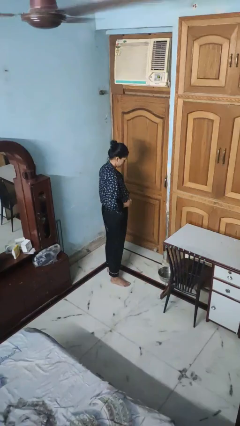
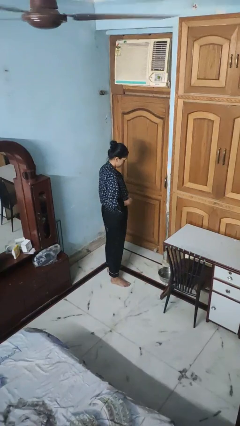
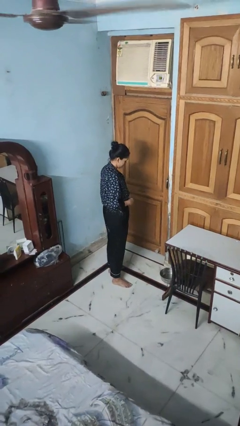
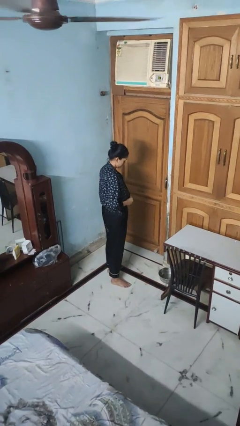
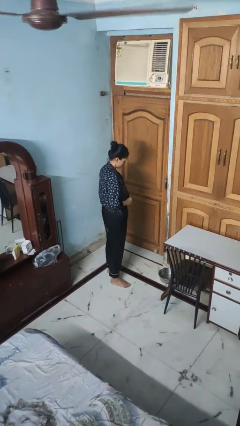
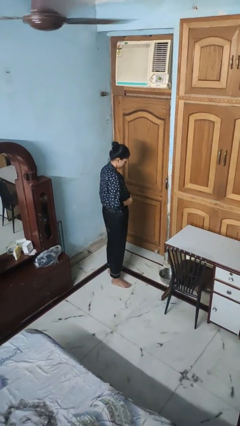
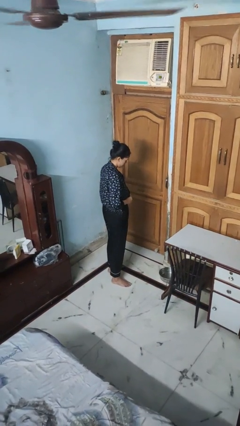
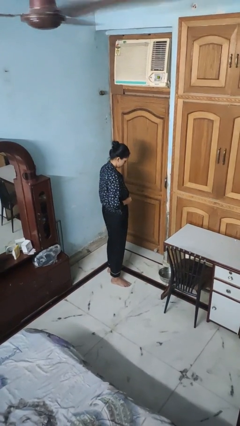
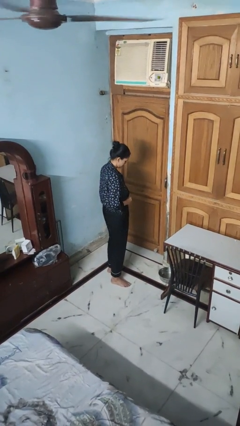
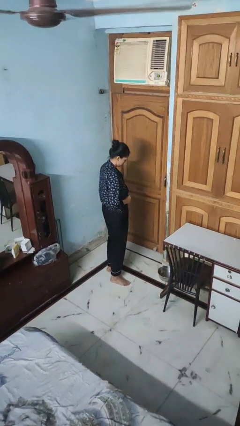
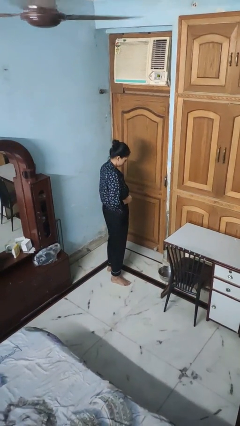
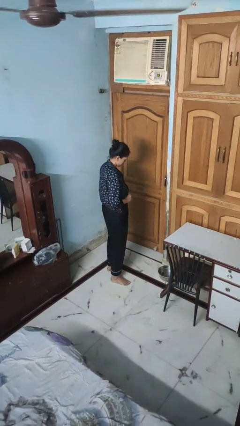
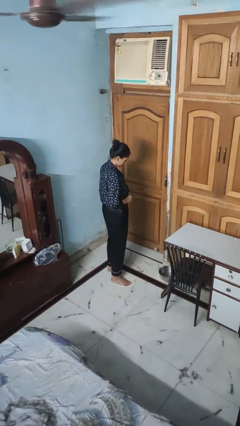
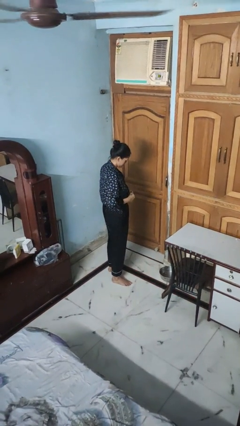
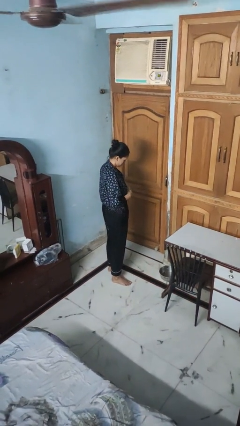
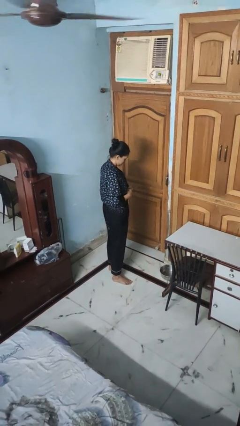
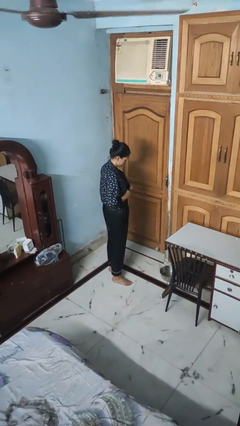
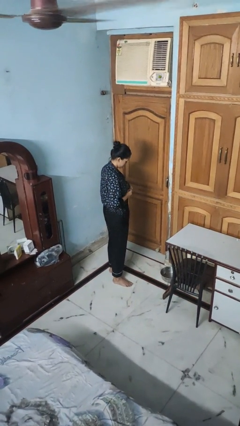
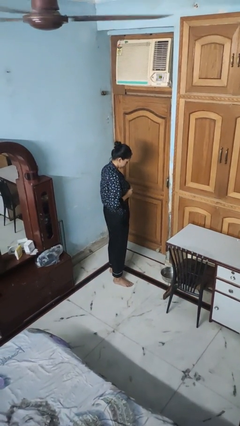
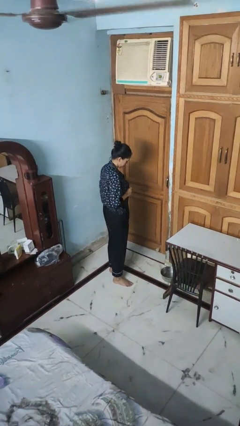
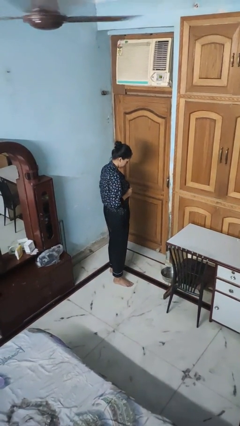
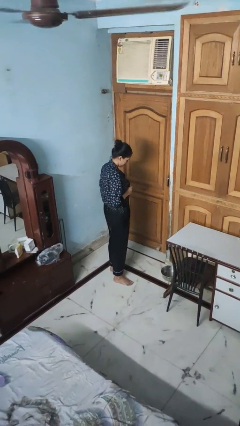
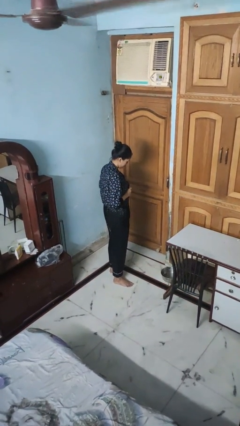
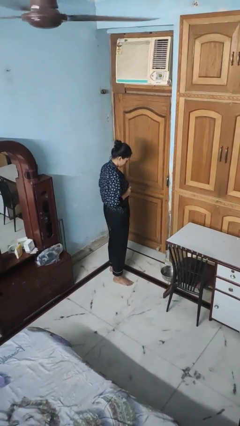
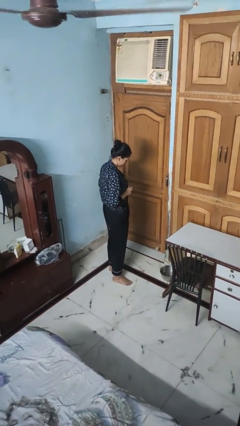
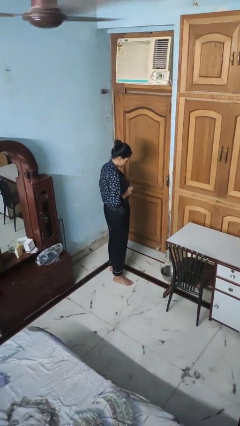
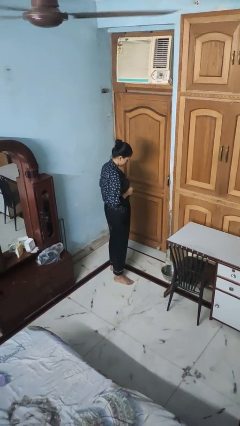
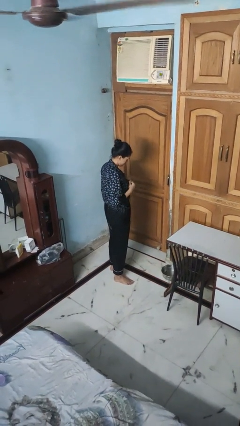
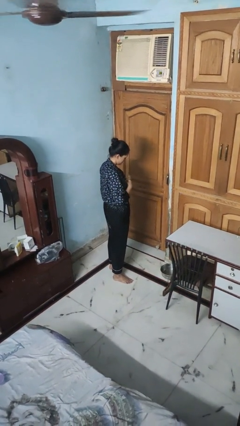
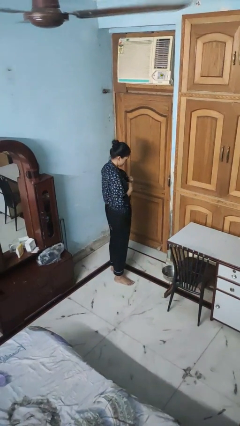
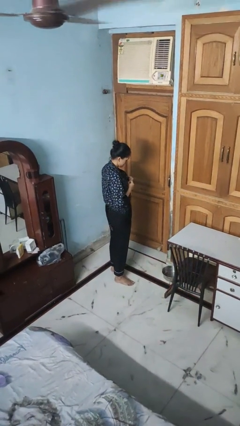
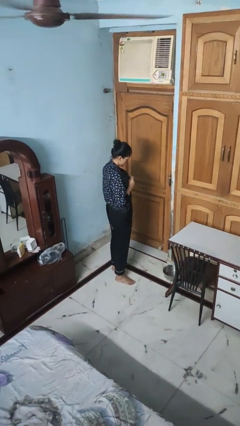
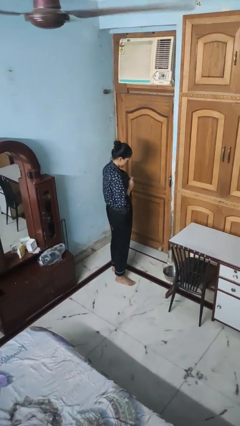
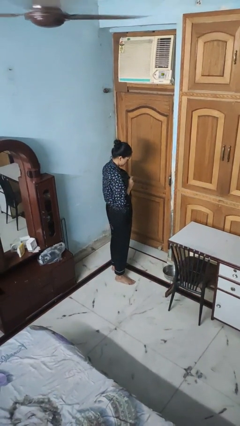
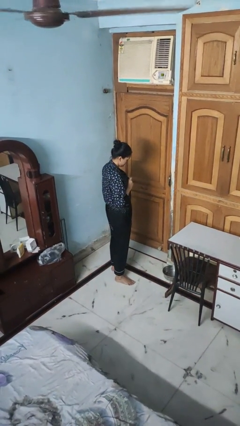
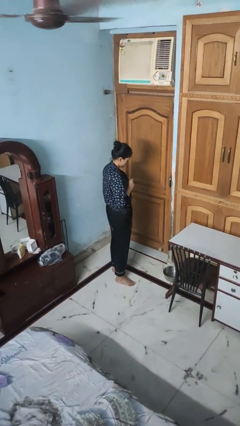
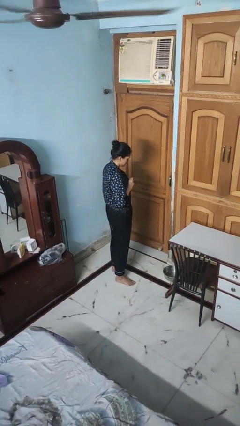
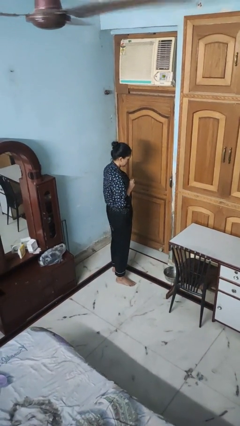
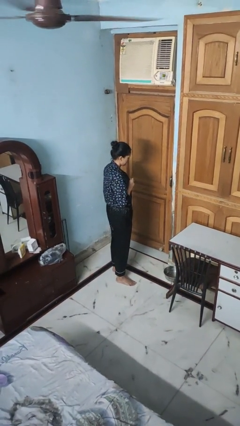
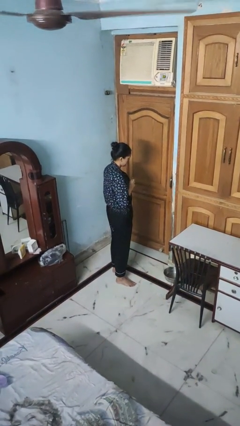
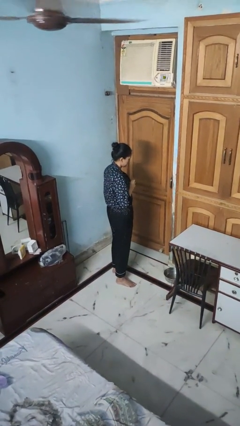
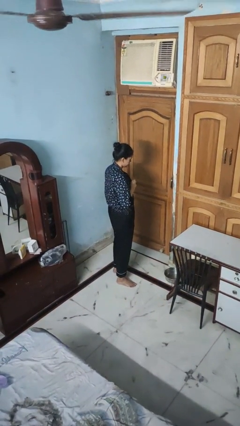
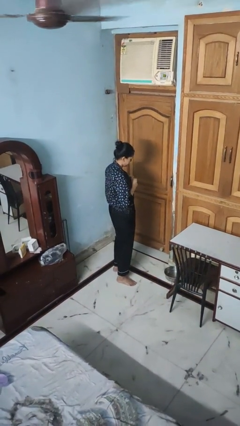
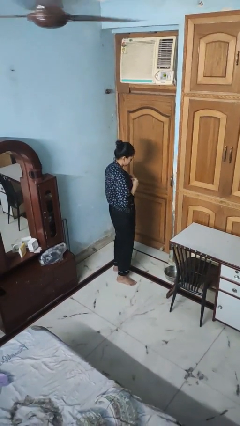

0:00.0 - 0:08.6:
person buttons shirt

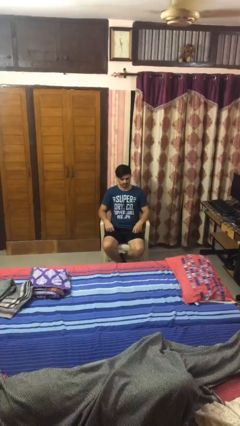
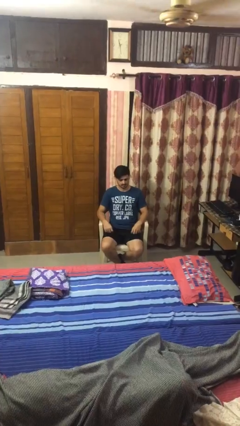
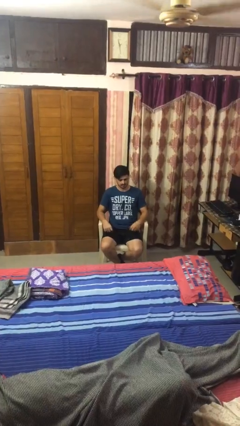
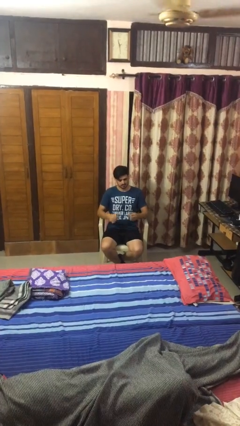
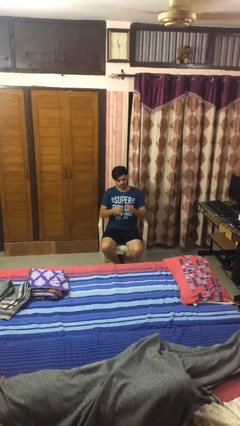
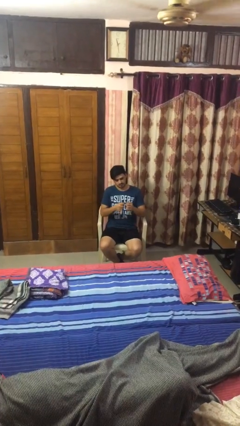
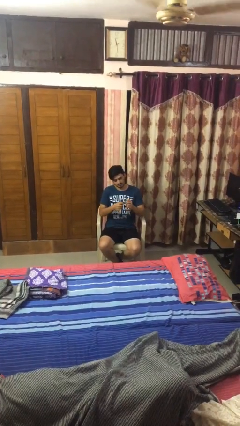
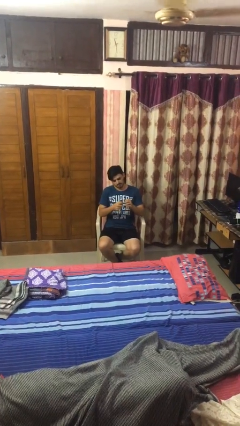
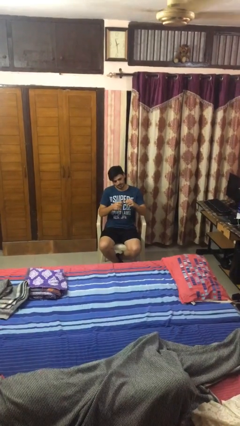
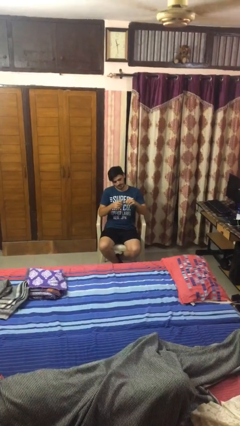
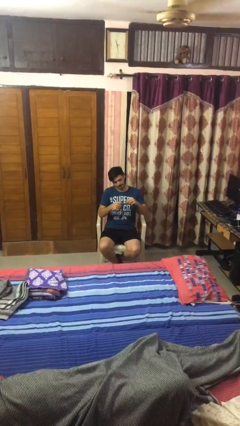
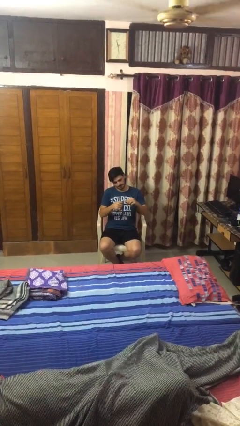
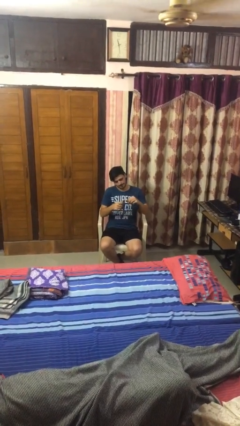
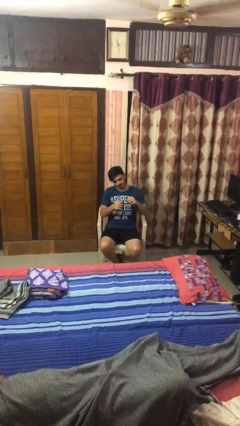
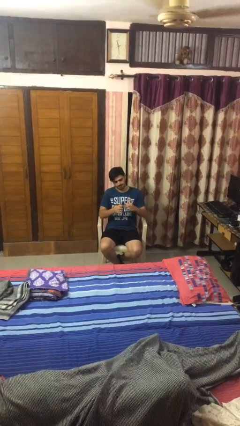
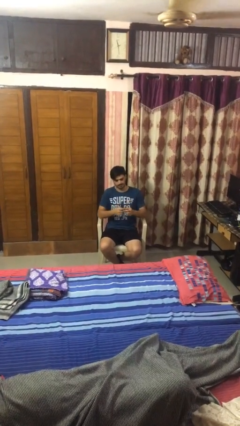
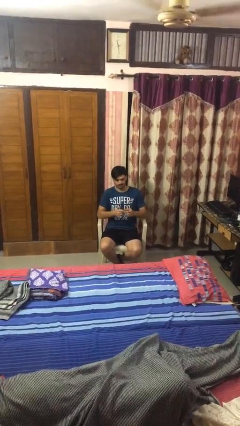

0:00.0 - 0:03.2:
person files fingernails

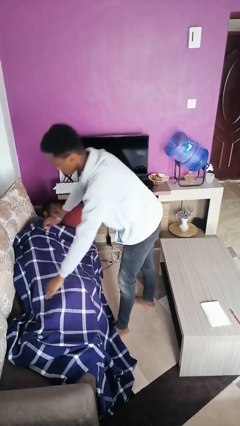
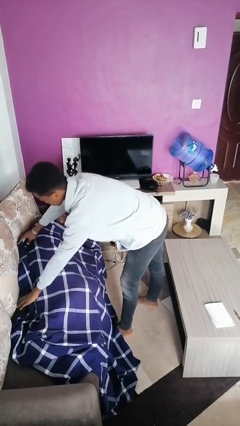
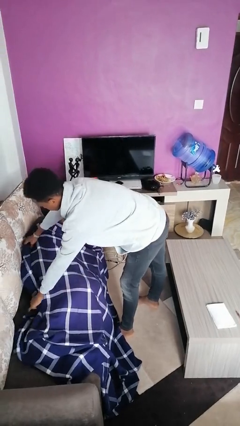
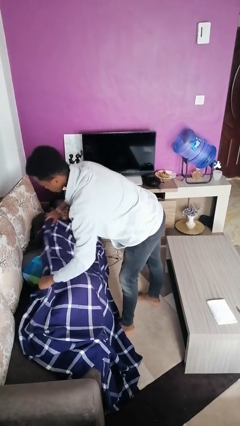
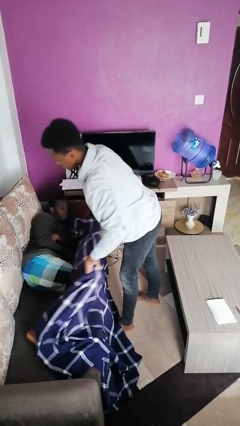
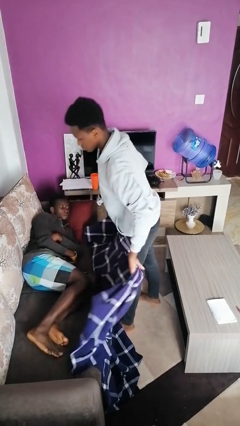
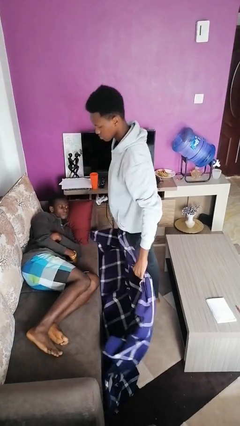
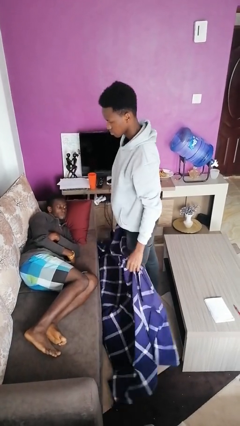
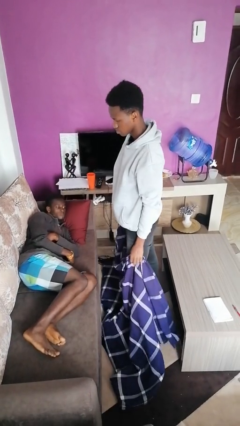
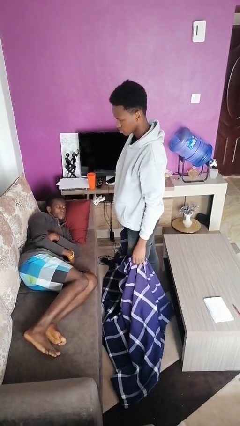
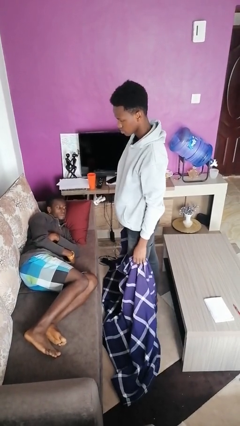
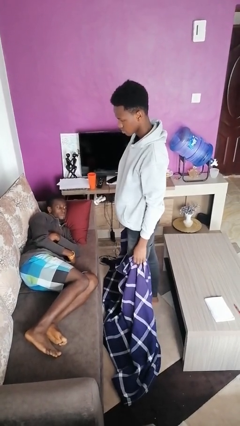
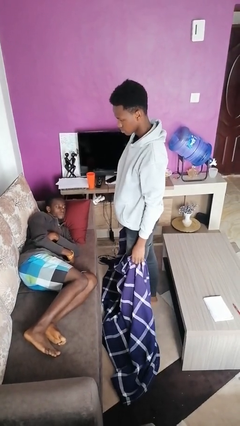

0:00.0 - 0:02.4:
person uncovers friend with blanket

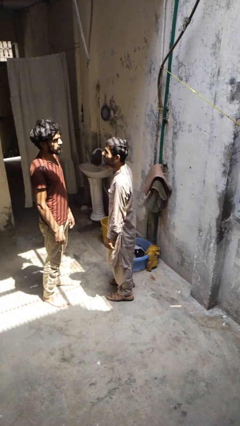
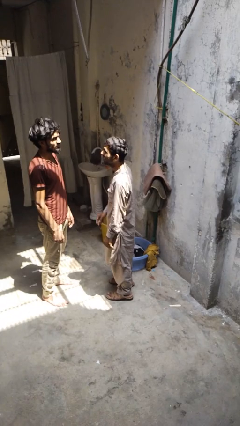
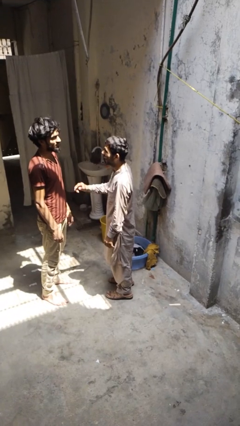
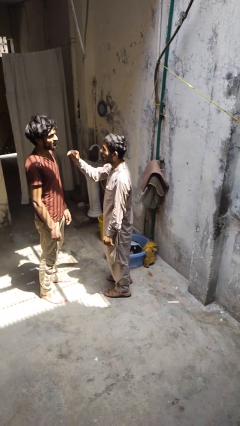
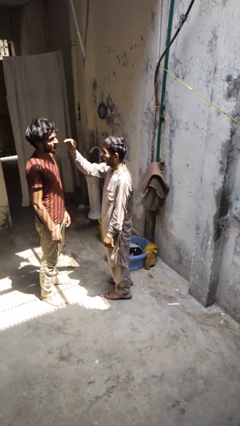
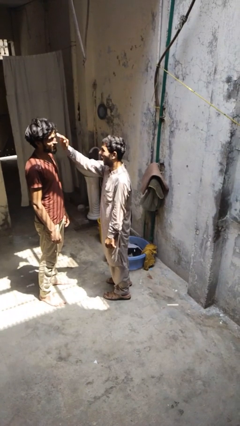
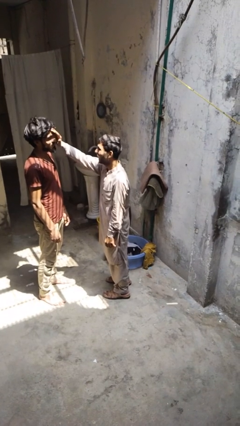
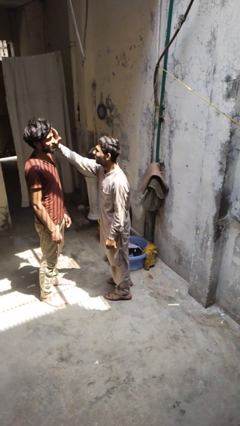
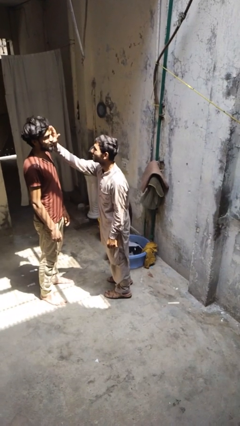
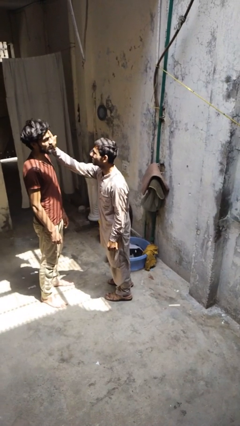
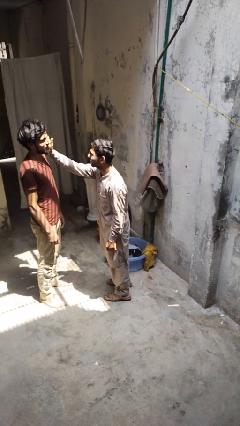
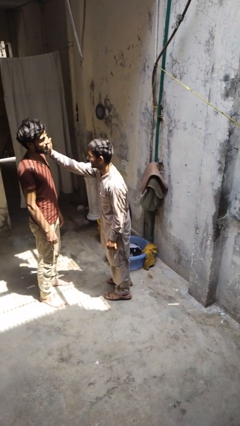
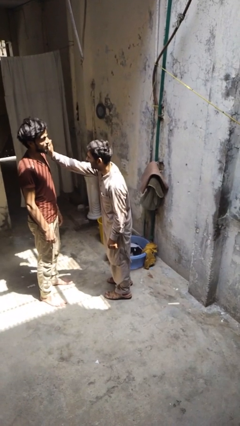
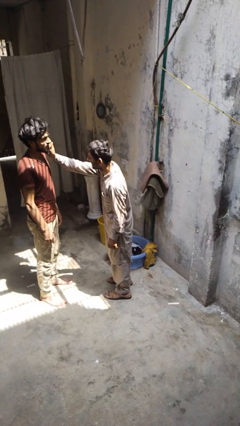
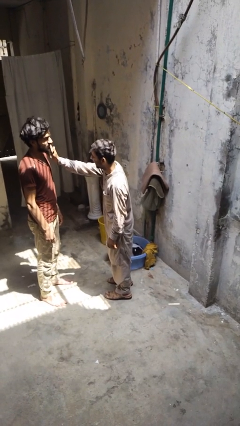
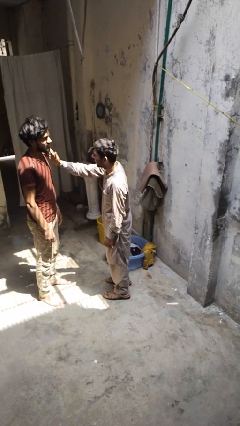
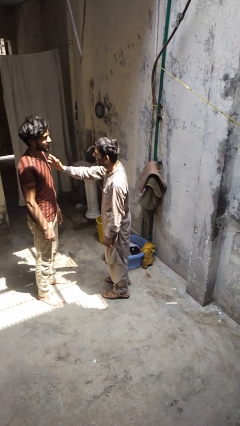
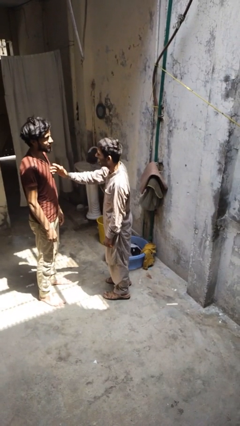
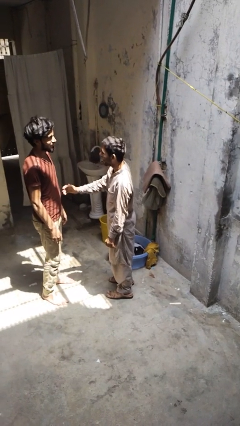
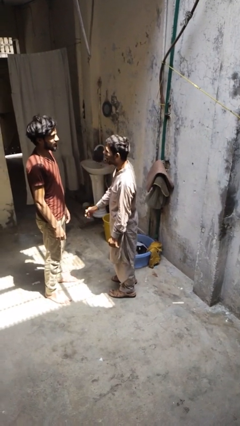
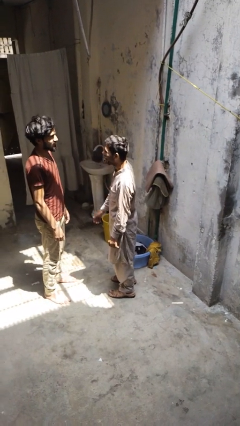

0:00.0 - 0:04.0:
person touches face of person
